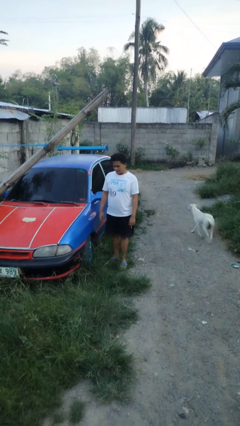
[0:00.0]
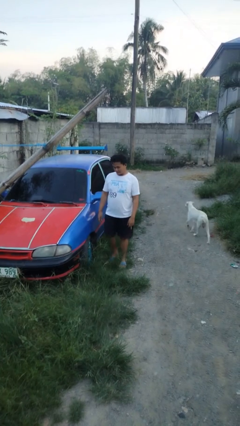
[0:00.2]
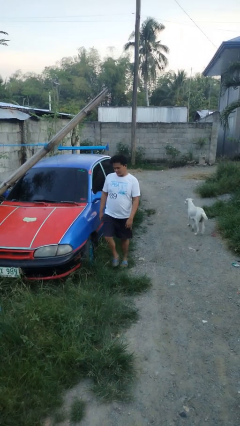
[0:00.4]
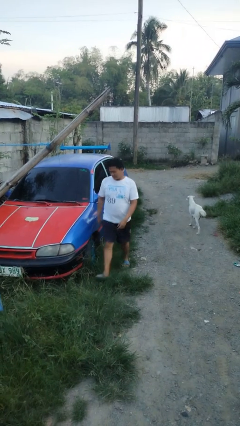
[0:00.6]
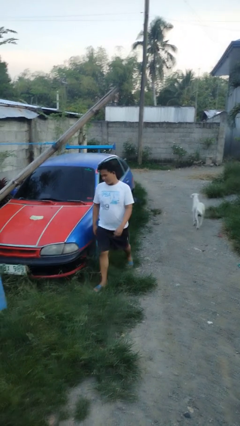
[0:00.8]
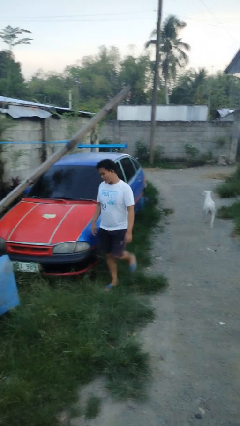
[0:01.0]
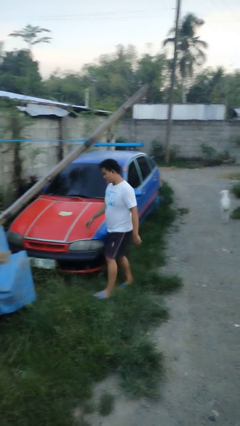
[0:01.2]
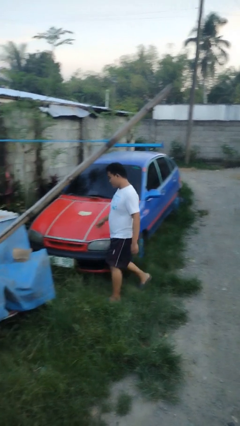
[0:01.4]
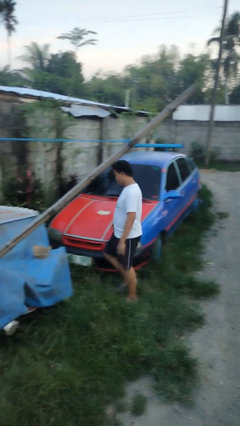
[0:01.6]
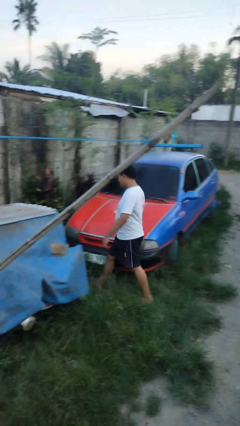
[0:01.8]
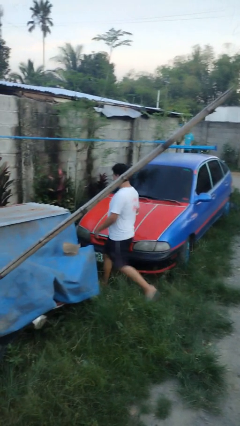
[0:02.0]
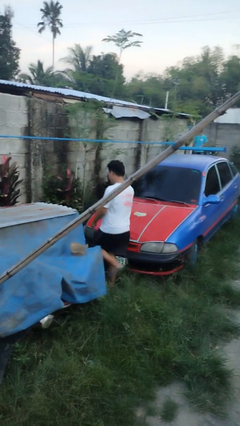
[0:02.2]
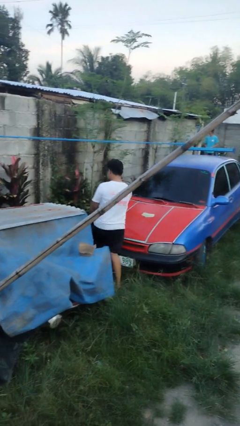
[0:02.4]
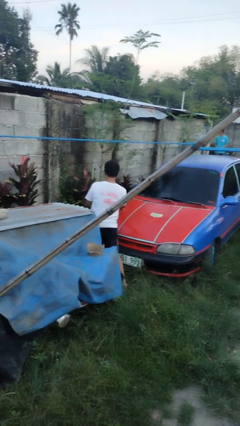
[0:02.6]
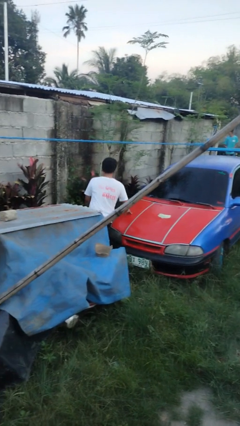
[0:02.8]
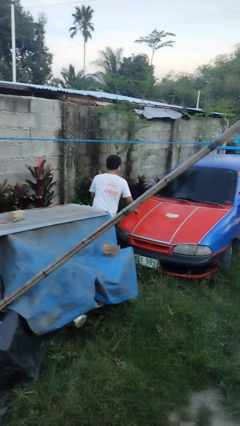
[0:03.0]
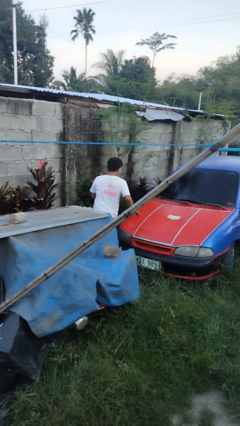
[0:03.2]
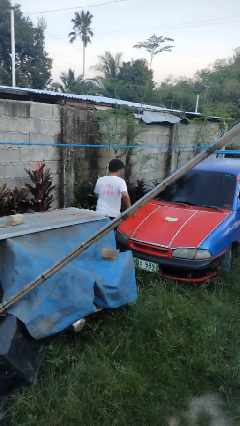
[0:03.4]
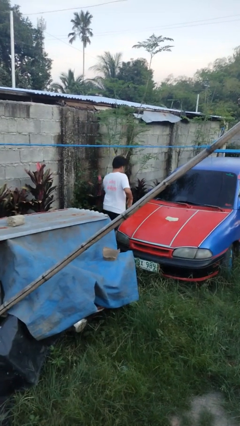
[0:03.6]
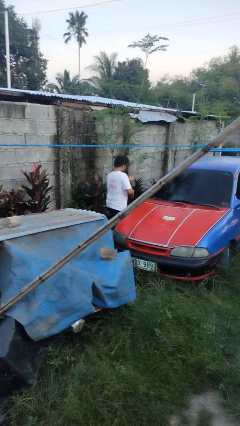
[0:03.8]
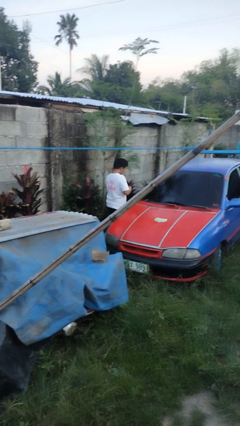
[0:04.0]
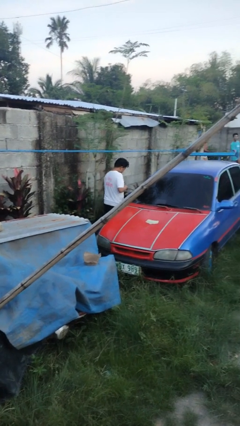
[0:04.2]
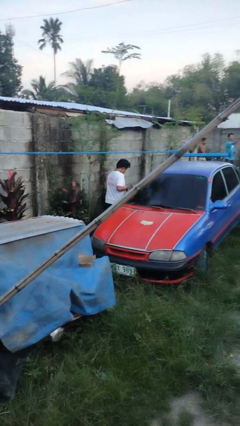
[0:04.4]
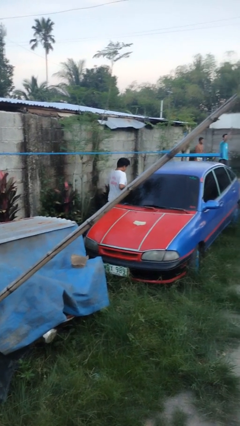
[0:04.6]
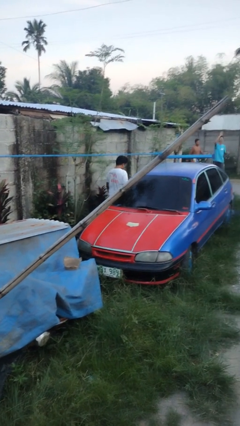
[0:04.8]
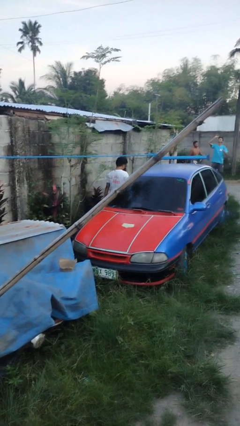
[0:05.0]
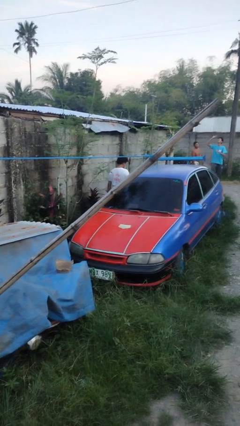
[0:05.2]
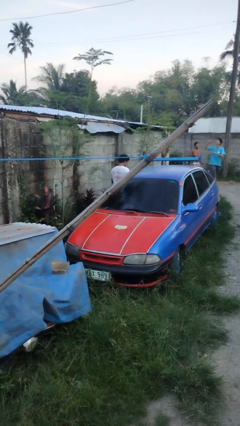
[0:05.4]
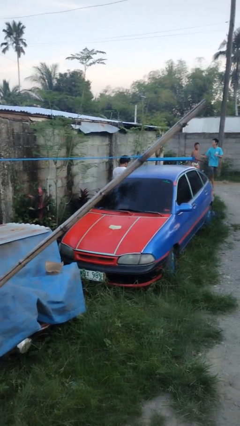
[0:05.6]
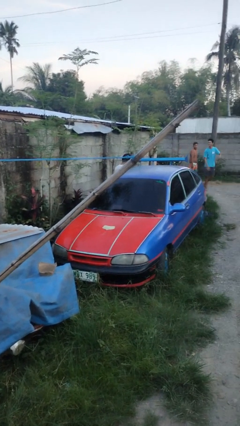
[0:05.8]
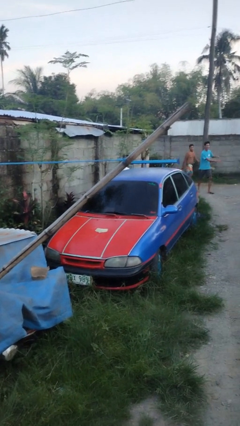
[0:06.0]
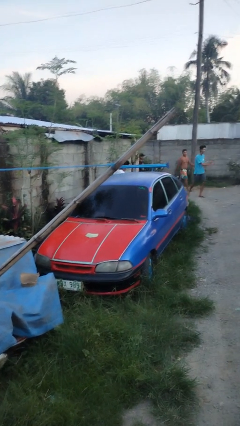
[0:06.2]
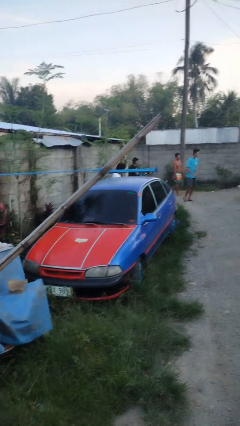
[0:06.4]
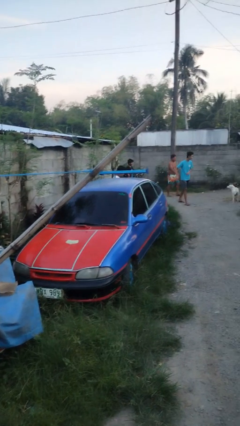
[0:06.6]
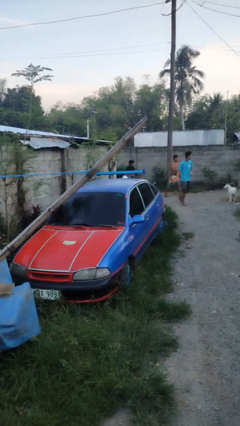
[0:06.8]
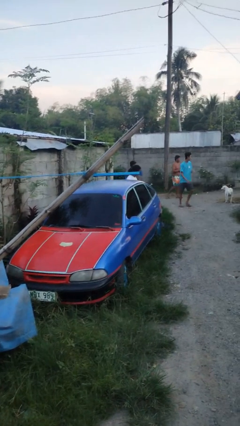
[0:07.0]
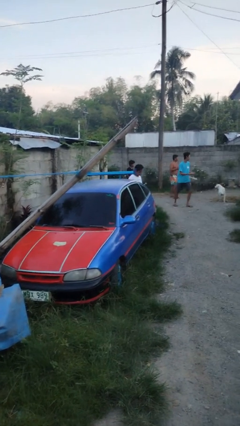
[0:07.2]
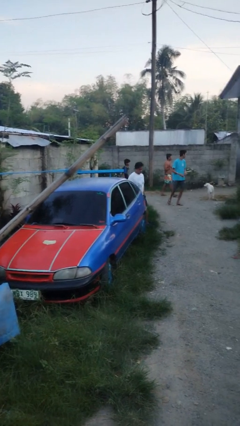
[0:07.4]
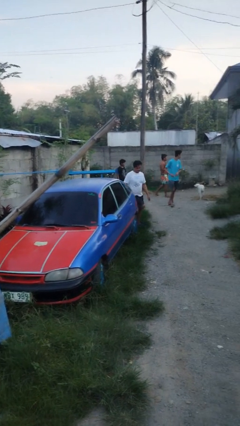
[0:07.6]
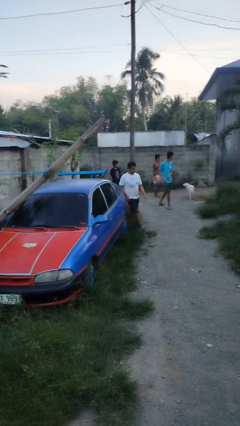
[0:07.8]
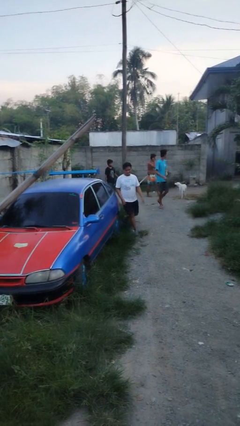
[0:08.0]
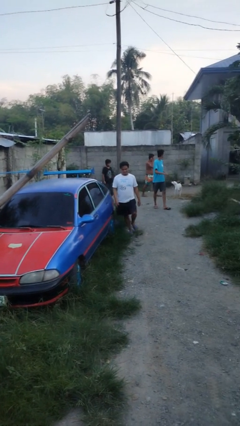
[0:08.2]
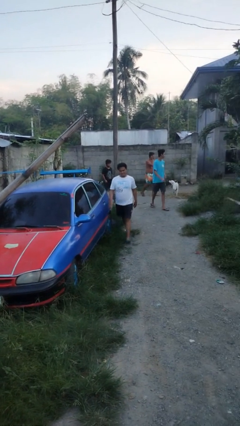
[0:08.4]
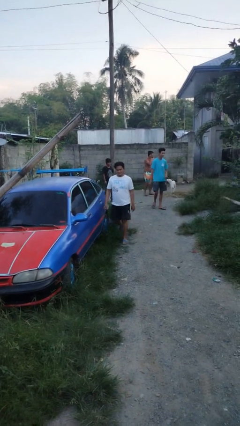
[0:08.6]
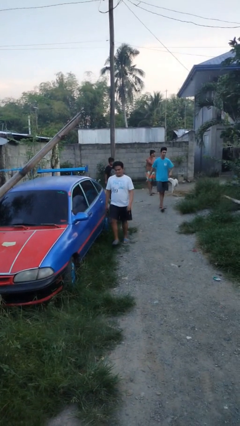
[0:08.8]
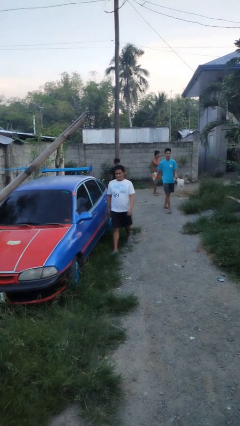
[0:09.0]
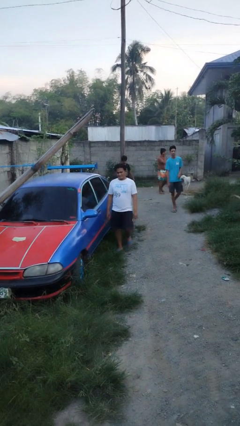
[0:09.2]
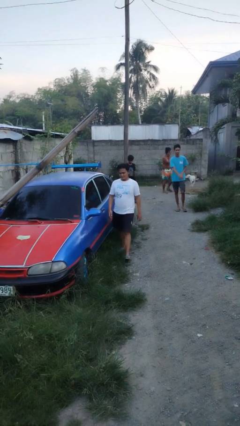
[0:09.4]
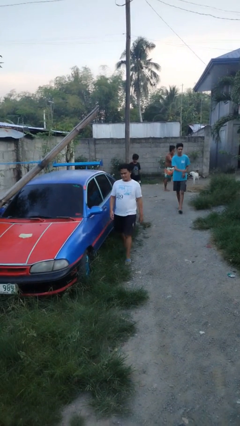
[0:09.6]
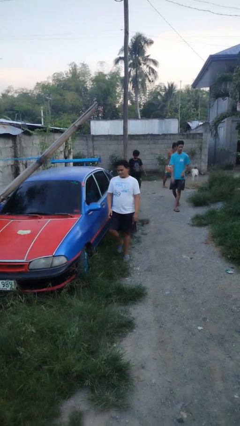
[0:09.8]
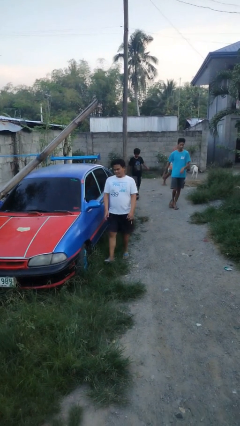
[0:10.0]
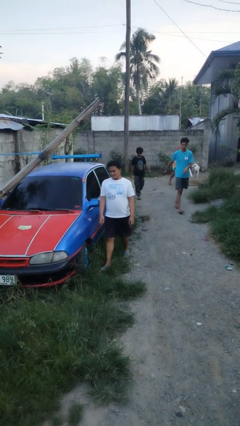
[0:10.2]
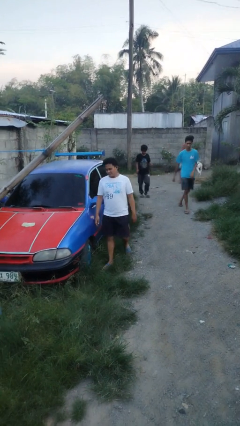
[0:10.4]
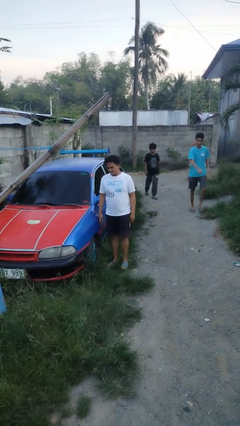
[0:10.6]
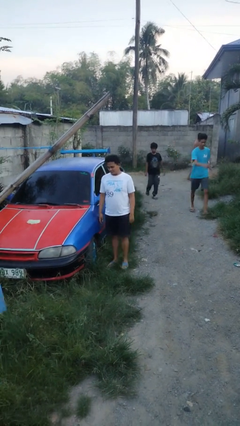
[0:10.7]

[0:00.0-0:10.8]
person walks around car

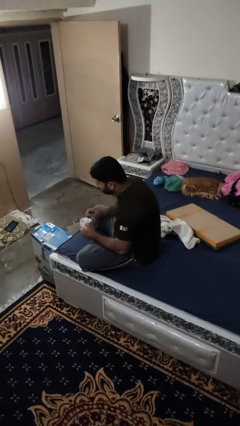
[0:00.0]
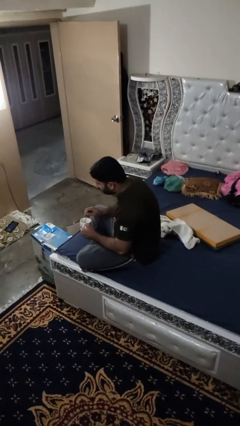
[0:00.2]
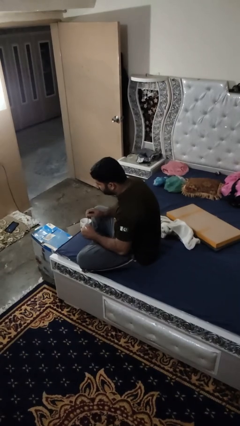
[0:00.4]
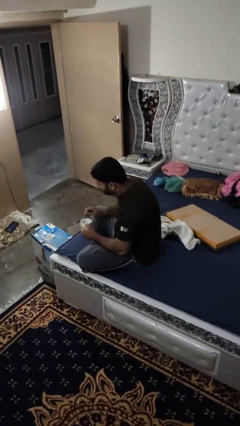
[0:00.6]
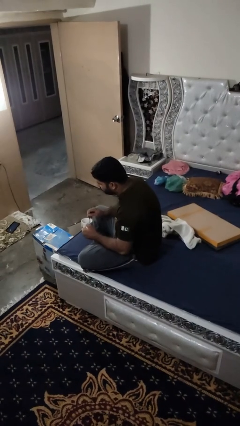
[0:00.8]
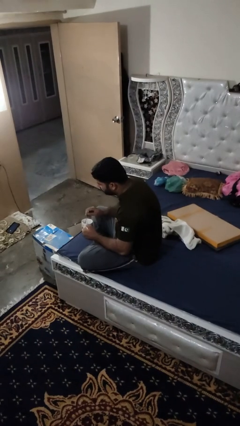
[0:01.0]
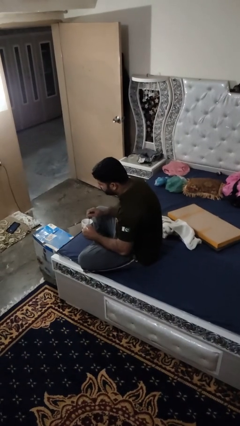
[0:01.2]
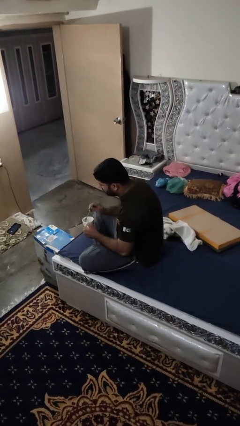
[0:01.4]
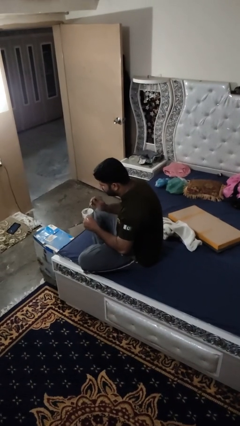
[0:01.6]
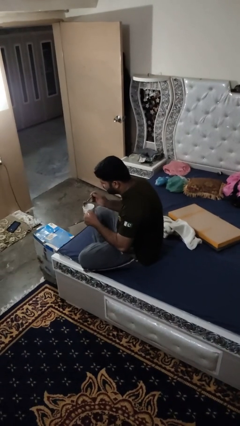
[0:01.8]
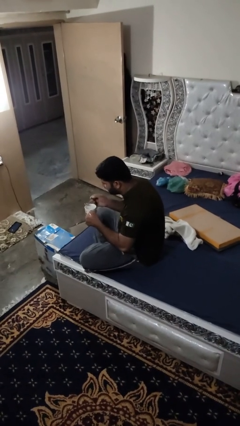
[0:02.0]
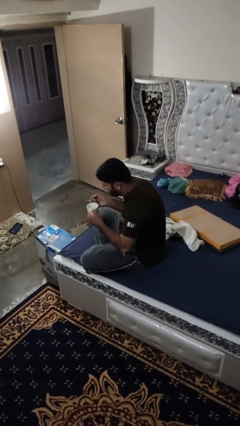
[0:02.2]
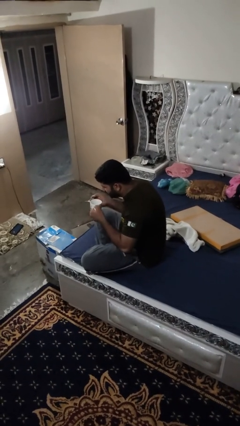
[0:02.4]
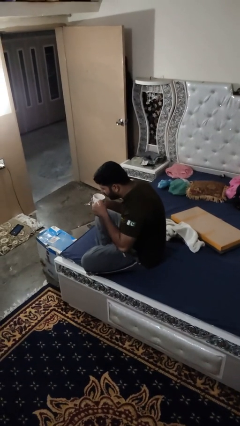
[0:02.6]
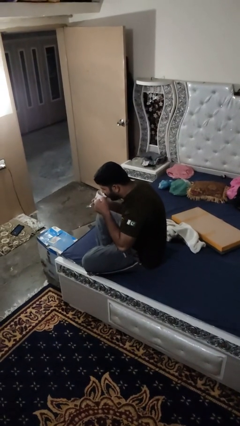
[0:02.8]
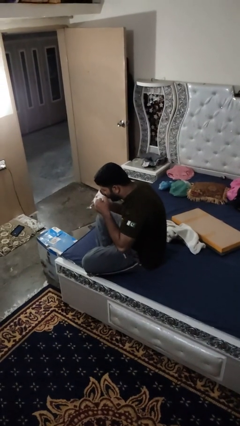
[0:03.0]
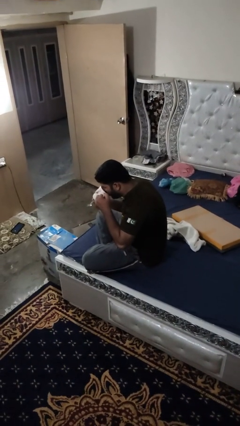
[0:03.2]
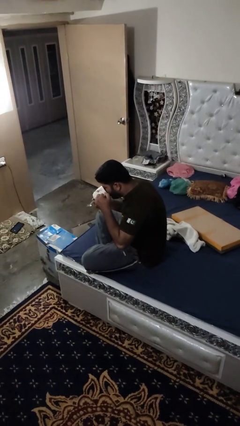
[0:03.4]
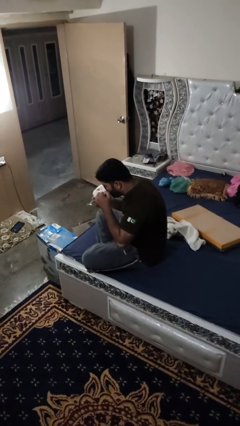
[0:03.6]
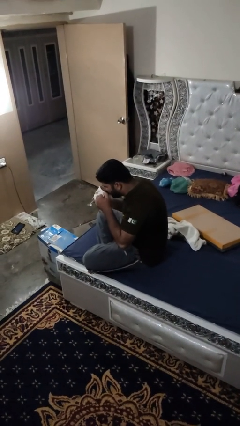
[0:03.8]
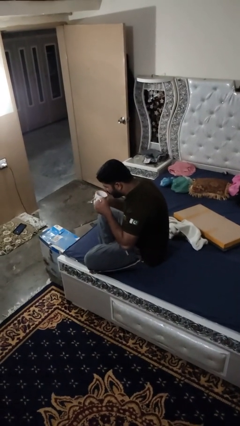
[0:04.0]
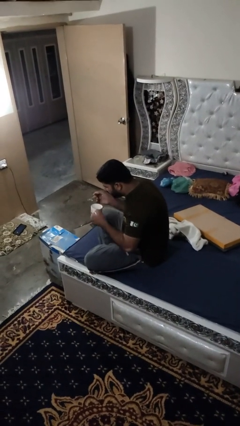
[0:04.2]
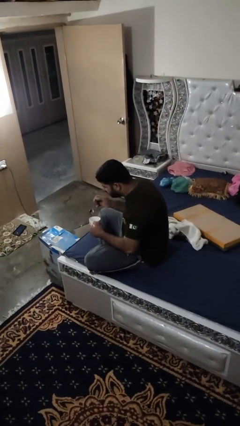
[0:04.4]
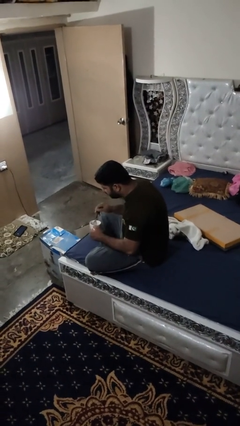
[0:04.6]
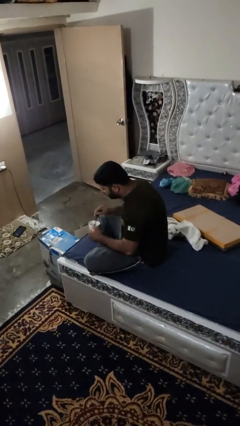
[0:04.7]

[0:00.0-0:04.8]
person drinks from mug

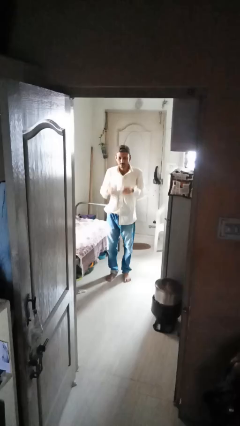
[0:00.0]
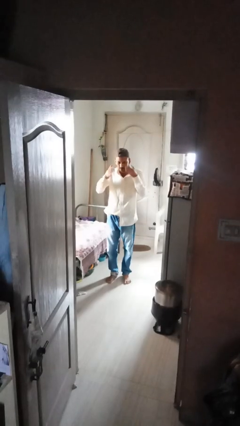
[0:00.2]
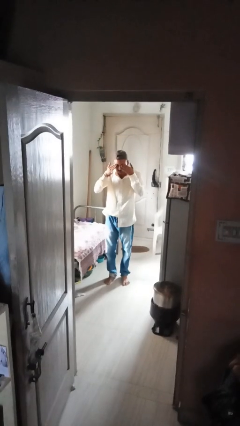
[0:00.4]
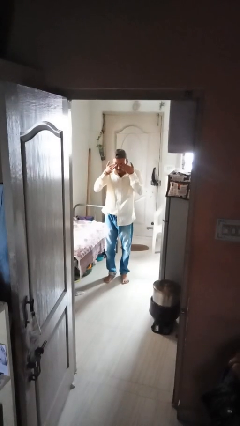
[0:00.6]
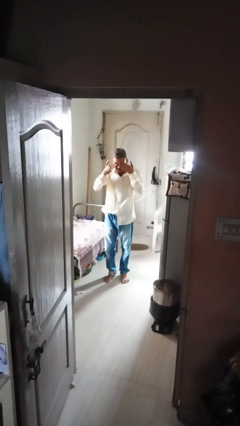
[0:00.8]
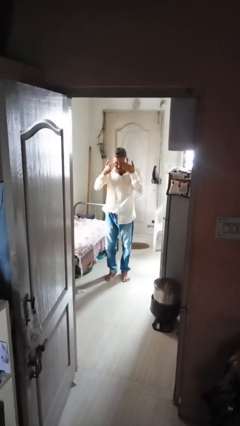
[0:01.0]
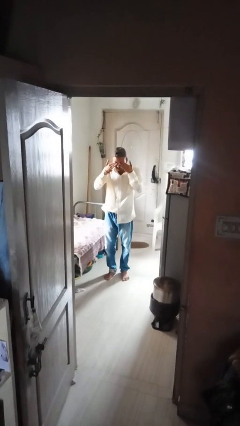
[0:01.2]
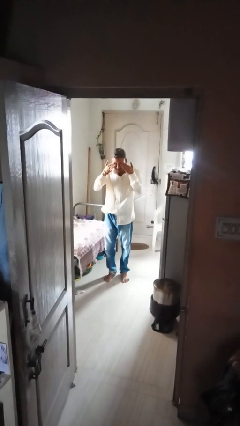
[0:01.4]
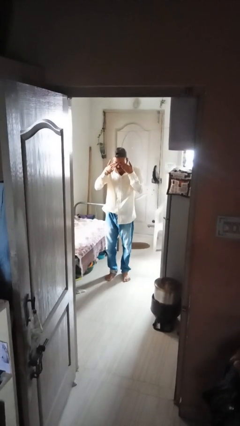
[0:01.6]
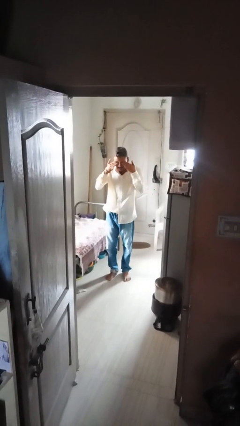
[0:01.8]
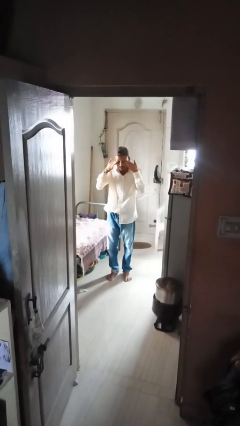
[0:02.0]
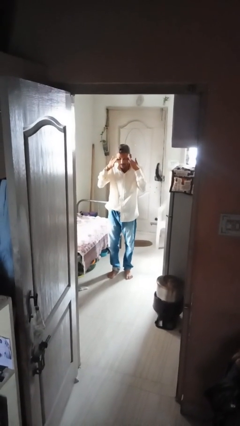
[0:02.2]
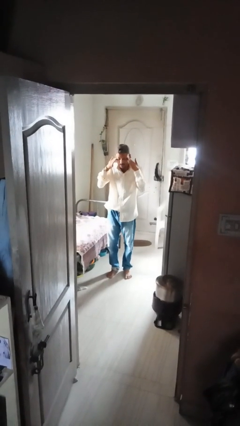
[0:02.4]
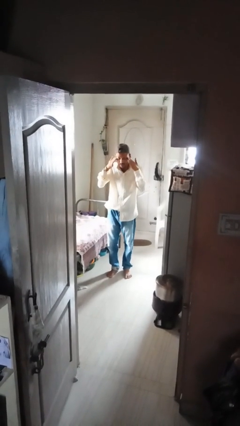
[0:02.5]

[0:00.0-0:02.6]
person rubs eyes
